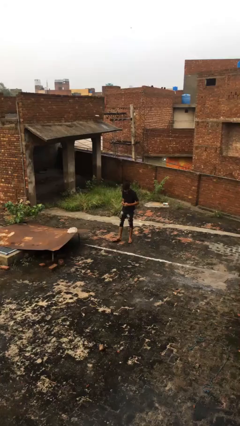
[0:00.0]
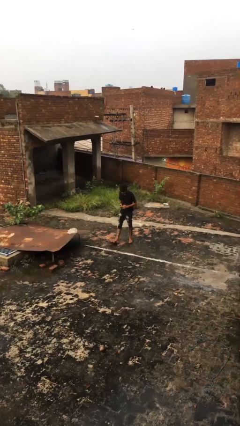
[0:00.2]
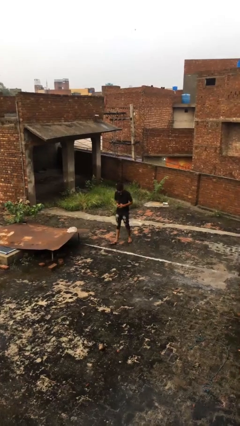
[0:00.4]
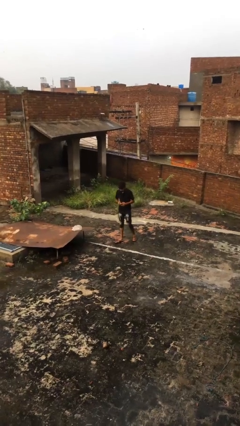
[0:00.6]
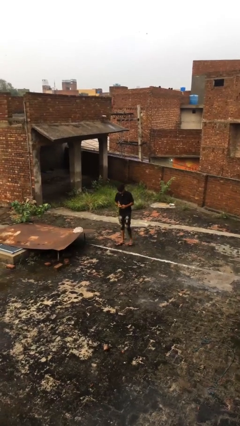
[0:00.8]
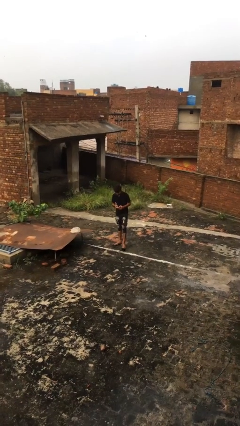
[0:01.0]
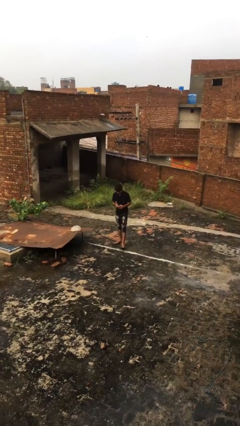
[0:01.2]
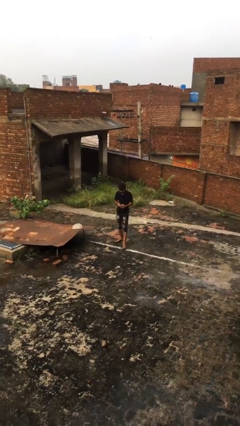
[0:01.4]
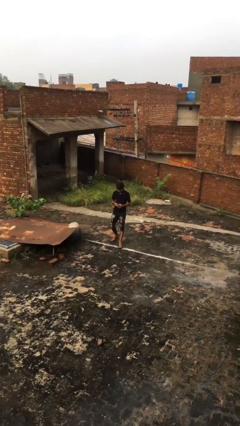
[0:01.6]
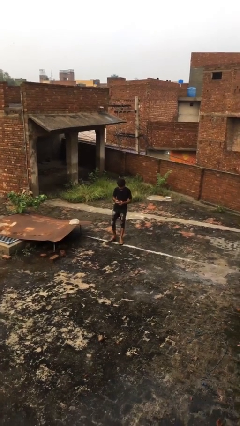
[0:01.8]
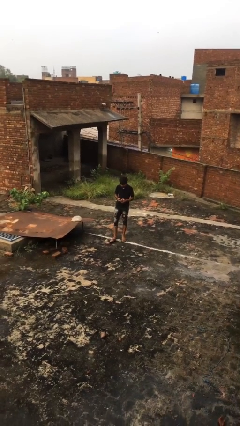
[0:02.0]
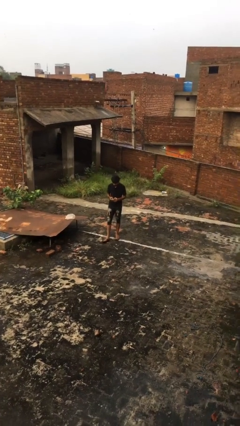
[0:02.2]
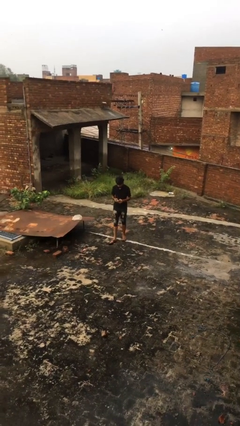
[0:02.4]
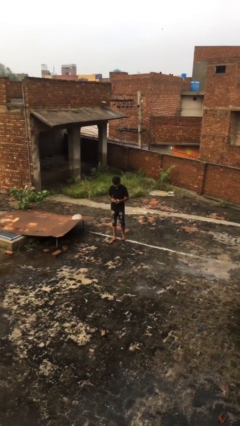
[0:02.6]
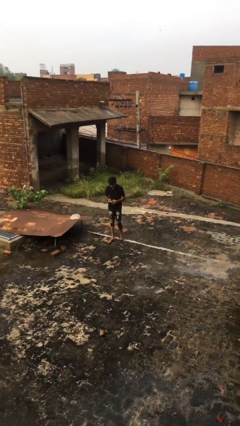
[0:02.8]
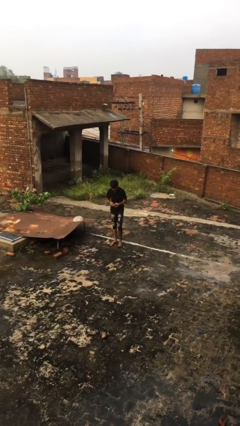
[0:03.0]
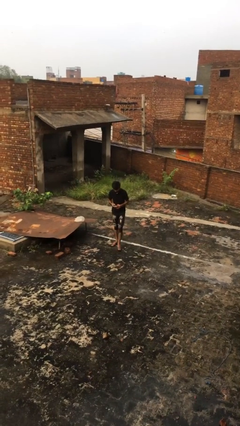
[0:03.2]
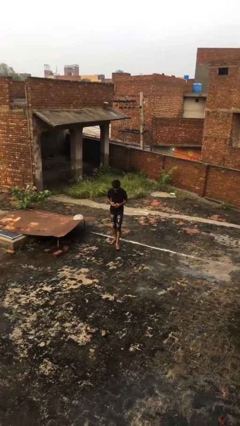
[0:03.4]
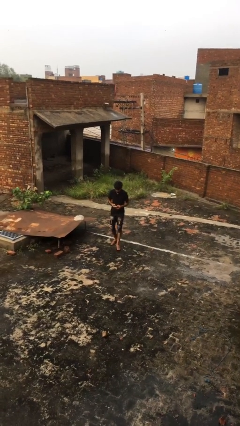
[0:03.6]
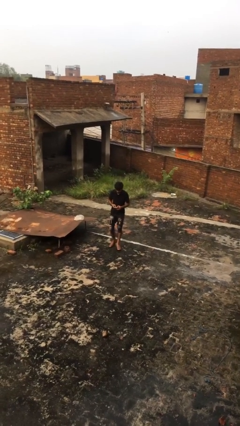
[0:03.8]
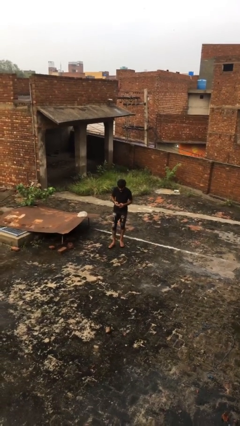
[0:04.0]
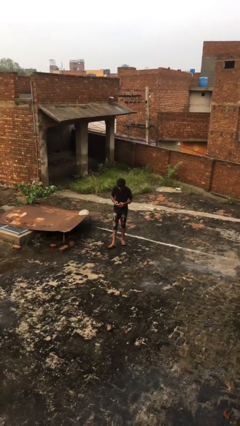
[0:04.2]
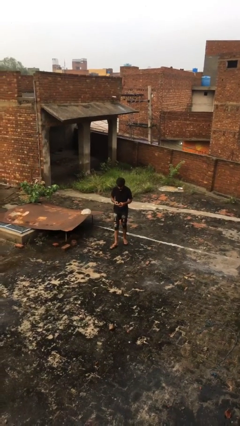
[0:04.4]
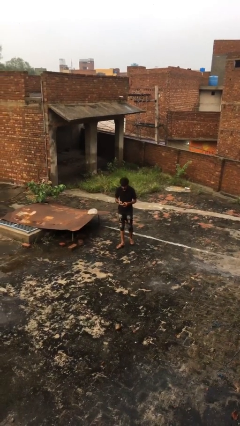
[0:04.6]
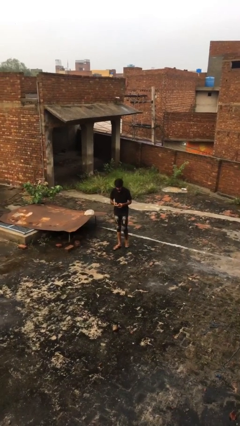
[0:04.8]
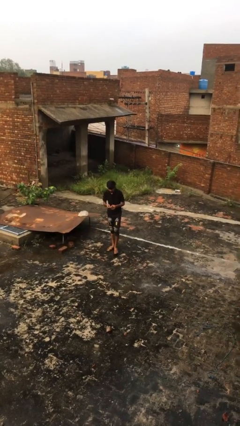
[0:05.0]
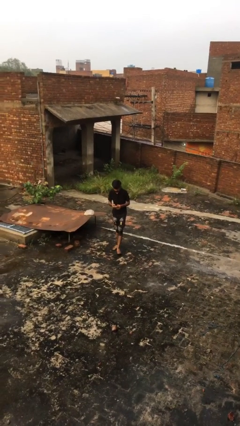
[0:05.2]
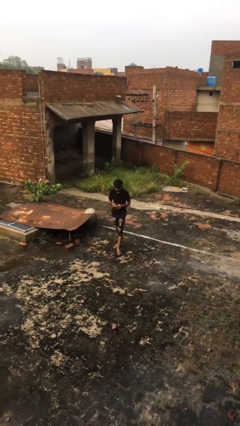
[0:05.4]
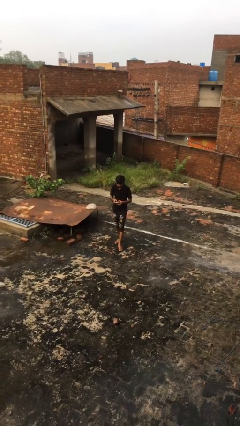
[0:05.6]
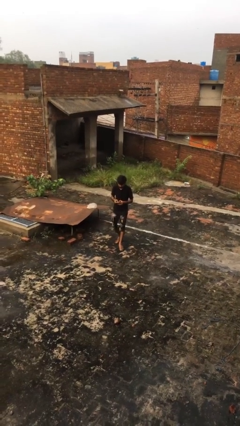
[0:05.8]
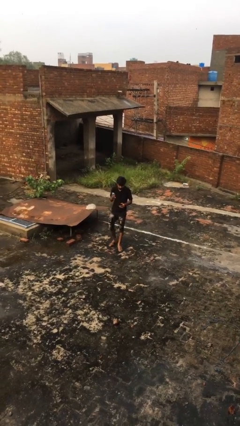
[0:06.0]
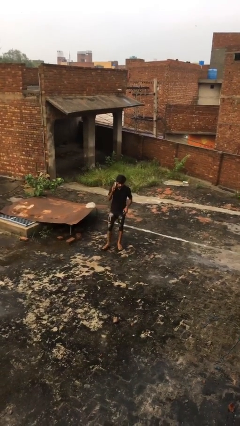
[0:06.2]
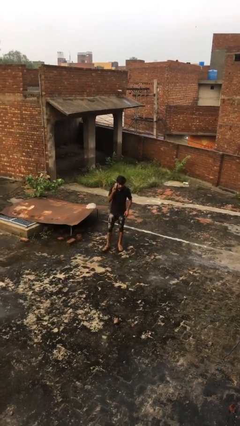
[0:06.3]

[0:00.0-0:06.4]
person texts on phone

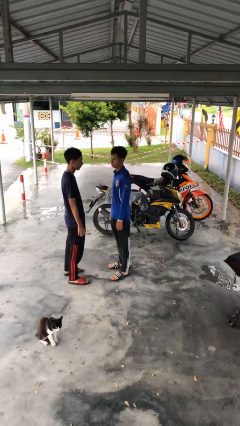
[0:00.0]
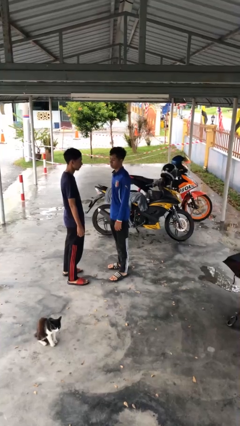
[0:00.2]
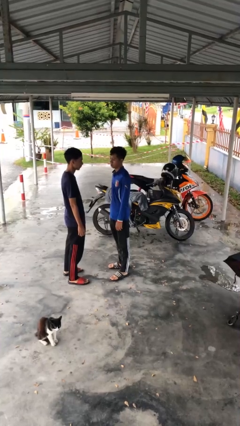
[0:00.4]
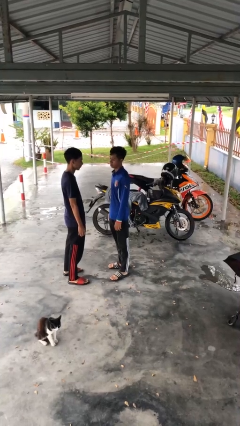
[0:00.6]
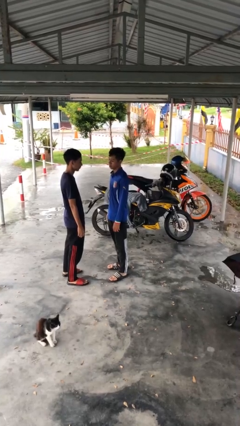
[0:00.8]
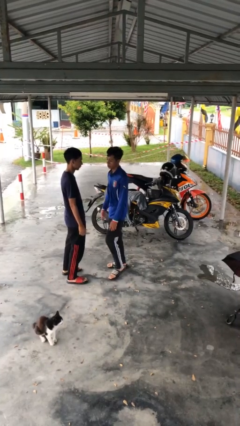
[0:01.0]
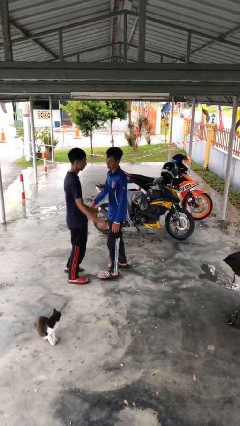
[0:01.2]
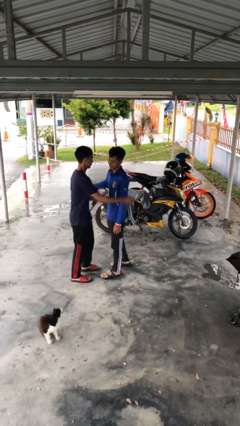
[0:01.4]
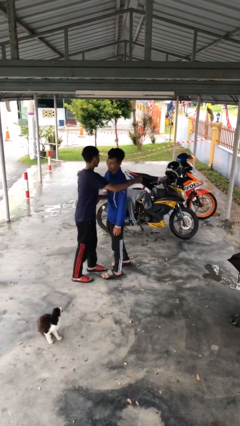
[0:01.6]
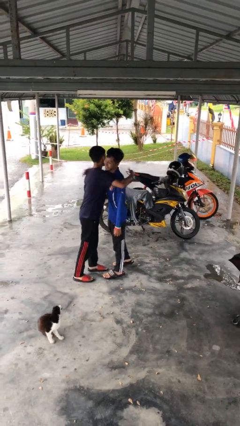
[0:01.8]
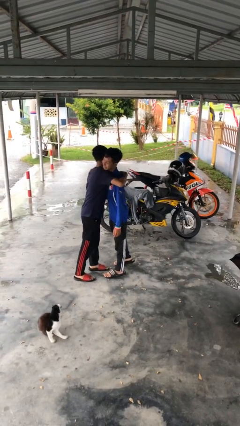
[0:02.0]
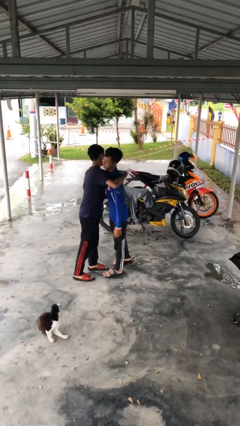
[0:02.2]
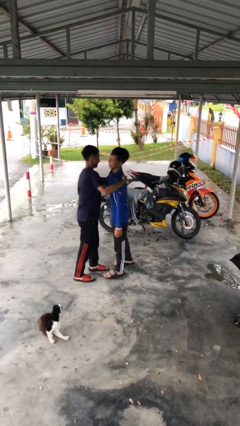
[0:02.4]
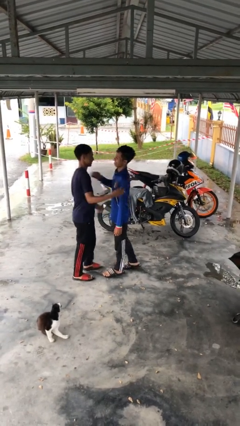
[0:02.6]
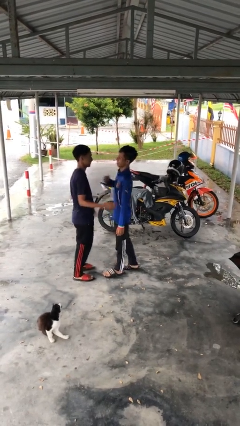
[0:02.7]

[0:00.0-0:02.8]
person embraces person

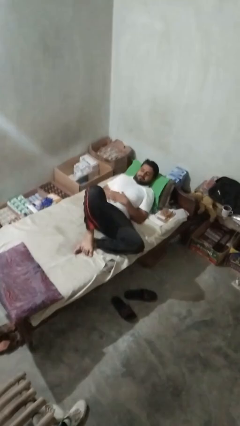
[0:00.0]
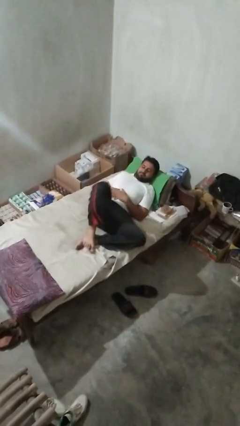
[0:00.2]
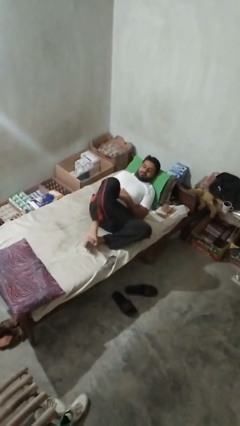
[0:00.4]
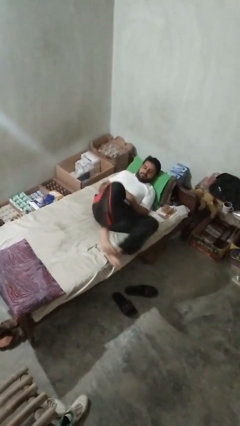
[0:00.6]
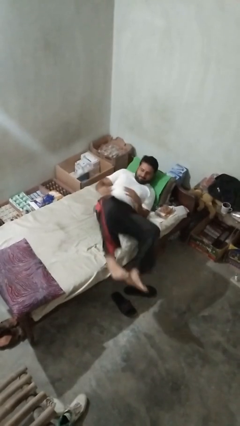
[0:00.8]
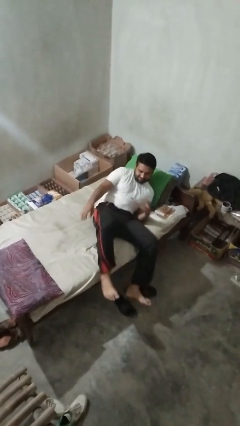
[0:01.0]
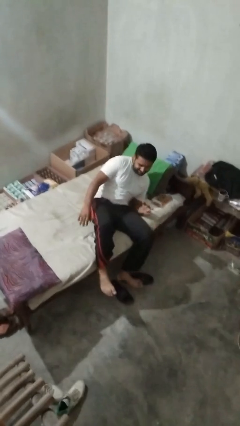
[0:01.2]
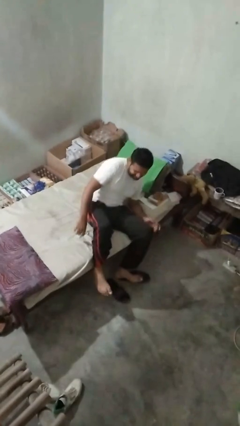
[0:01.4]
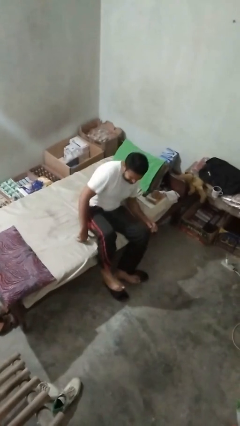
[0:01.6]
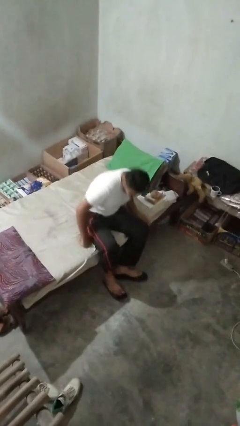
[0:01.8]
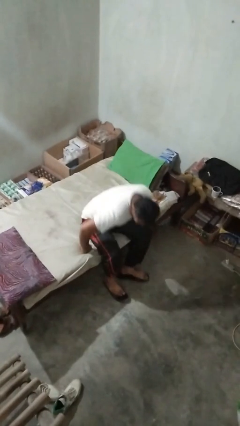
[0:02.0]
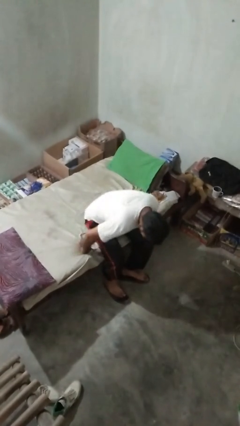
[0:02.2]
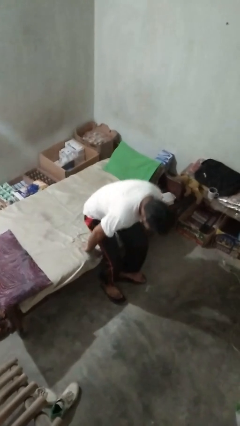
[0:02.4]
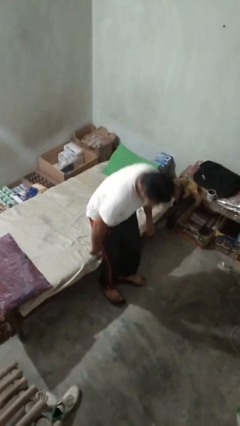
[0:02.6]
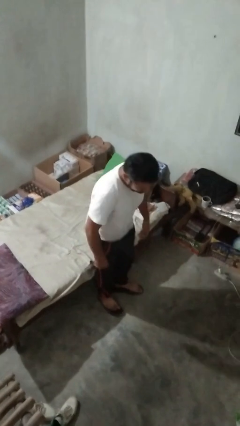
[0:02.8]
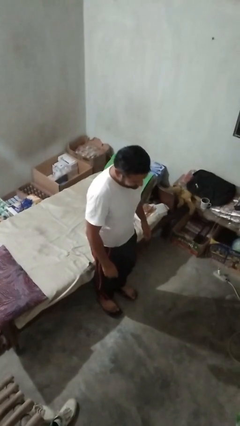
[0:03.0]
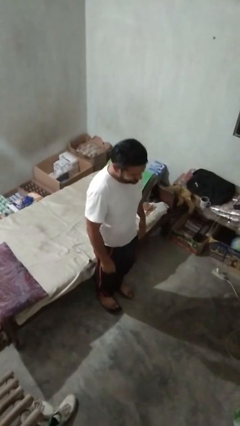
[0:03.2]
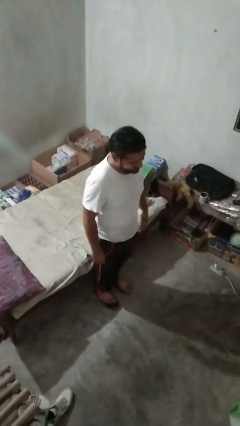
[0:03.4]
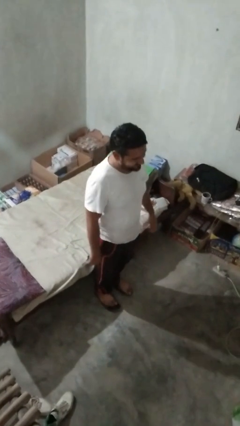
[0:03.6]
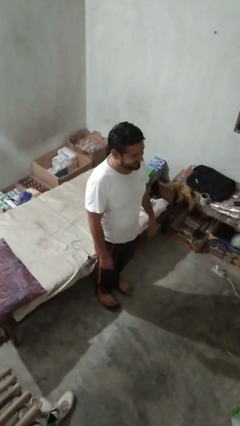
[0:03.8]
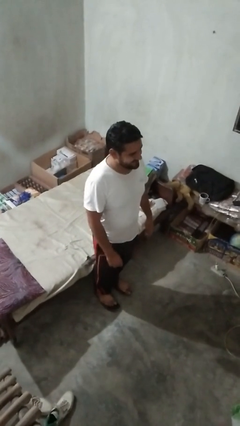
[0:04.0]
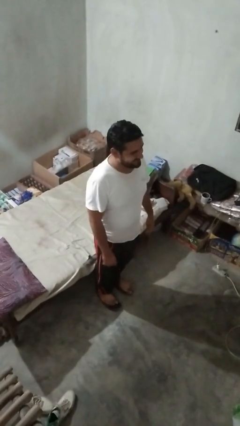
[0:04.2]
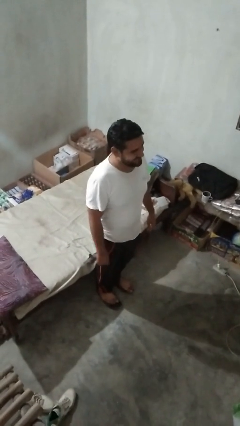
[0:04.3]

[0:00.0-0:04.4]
person stands up

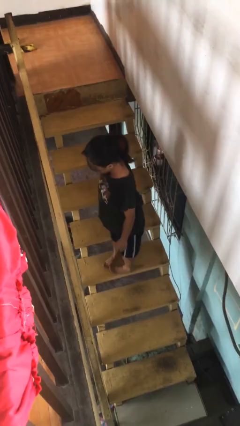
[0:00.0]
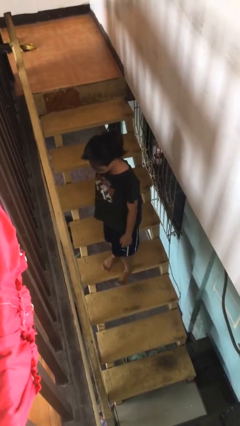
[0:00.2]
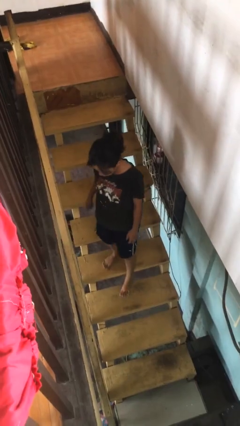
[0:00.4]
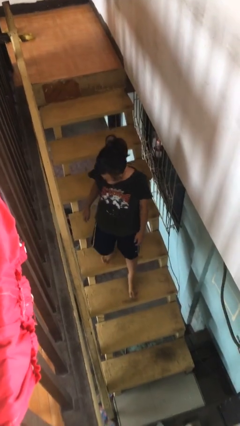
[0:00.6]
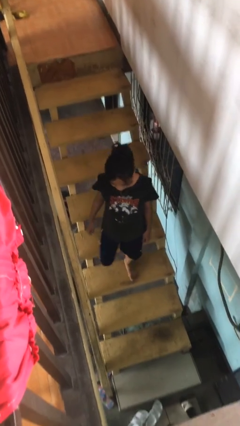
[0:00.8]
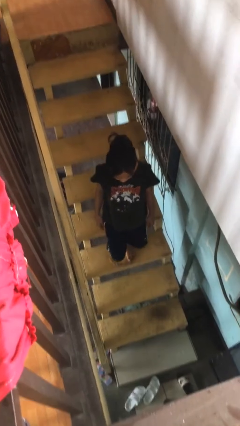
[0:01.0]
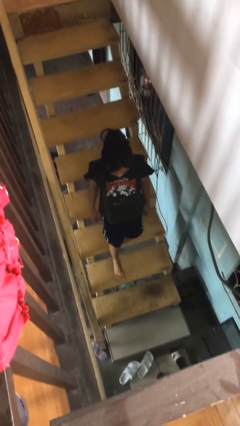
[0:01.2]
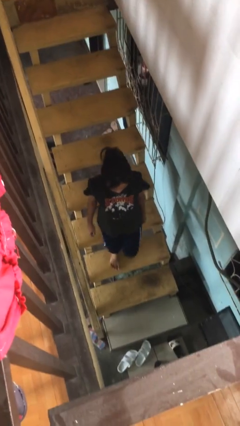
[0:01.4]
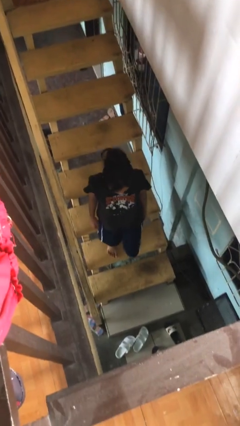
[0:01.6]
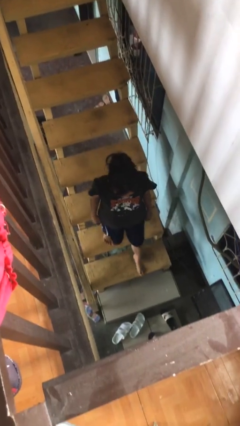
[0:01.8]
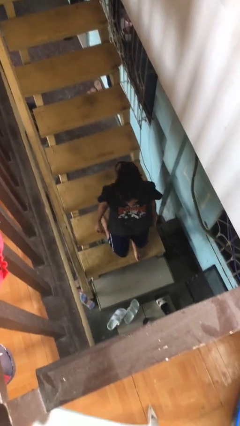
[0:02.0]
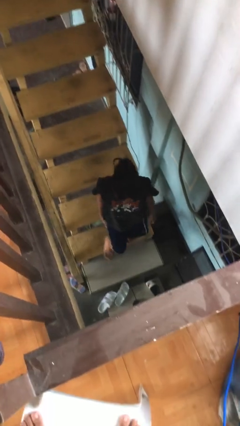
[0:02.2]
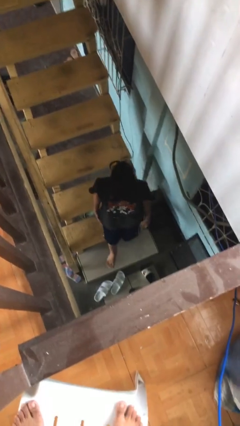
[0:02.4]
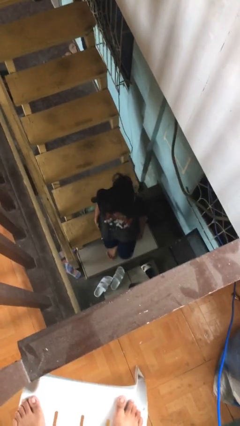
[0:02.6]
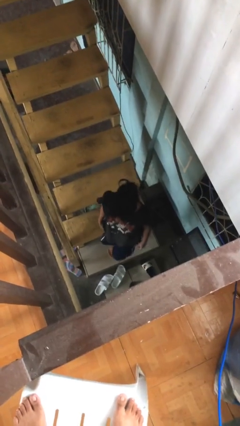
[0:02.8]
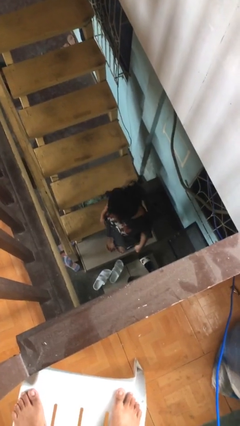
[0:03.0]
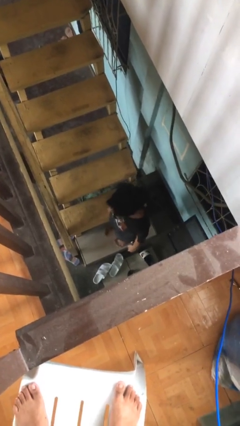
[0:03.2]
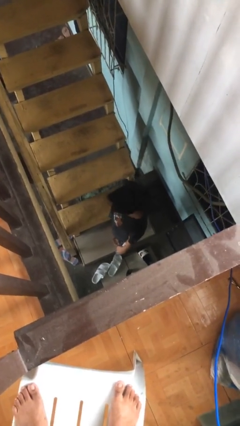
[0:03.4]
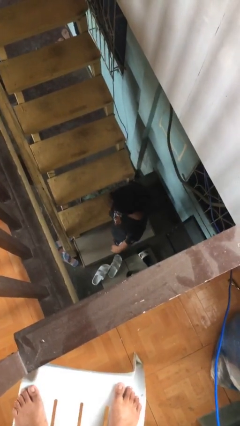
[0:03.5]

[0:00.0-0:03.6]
person climbs down stairs

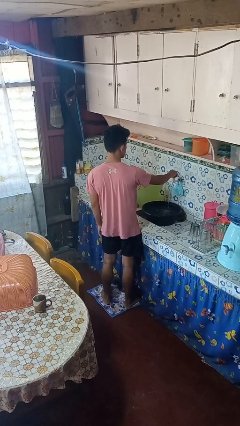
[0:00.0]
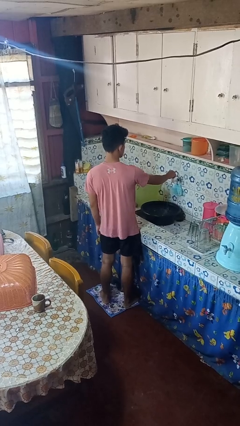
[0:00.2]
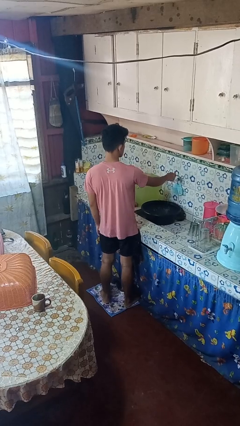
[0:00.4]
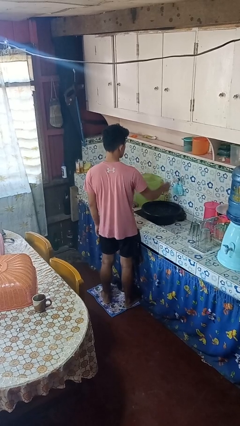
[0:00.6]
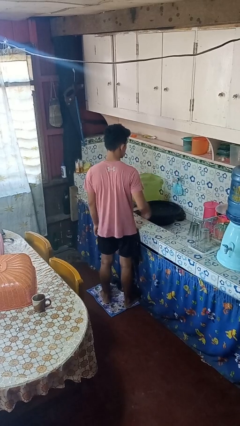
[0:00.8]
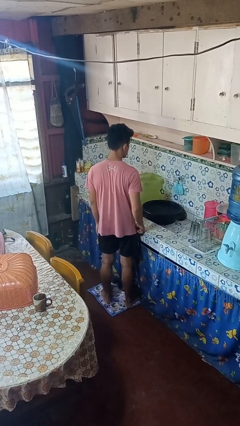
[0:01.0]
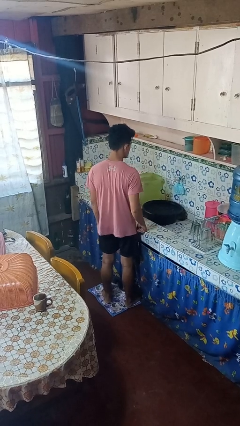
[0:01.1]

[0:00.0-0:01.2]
person turns off faucet
